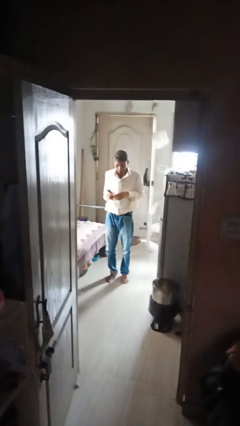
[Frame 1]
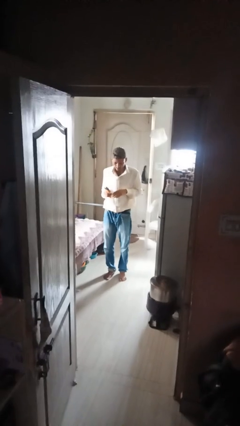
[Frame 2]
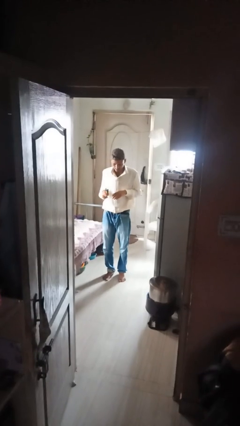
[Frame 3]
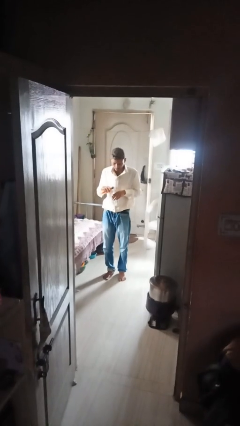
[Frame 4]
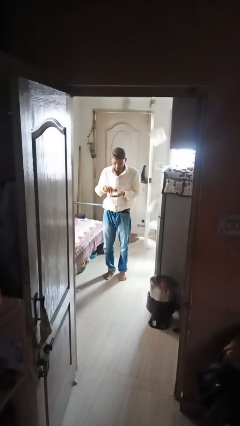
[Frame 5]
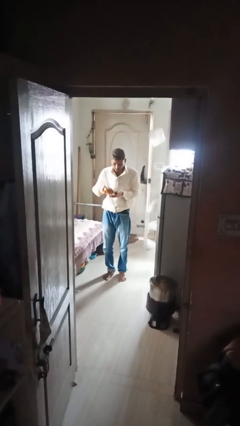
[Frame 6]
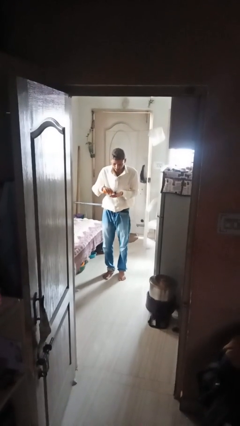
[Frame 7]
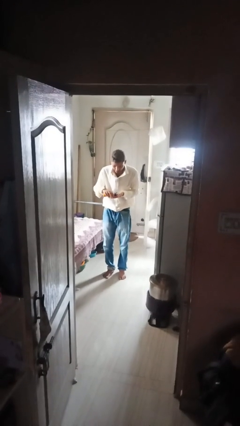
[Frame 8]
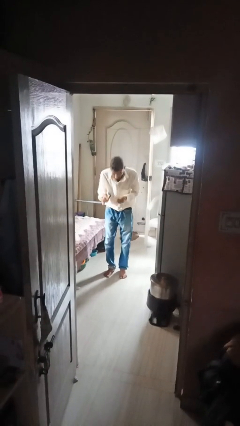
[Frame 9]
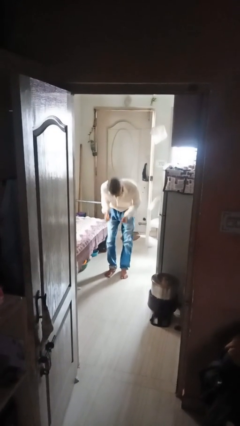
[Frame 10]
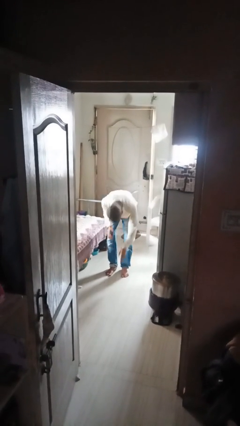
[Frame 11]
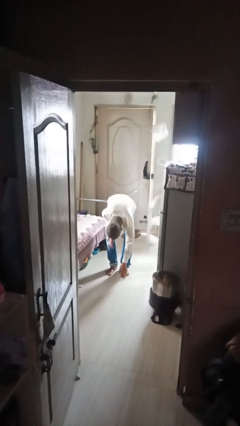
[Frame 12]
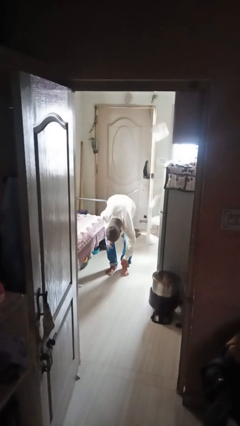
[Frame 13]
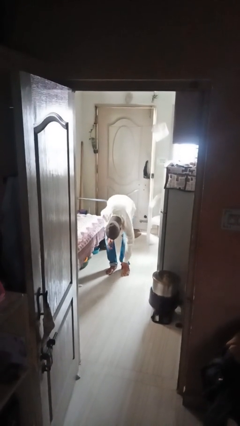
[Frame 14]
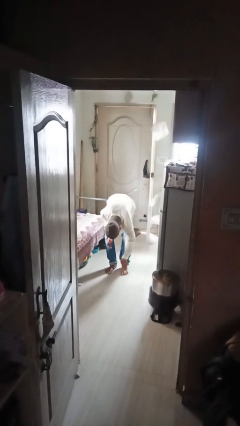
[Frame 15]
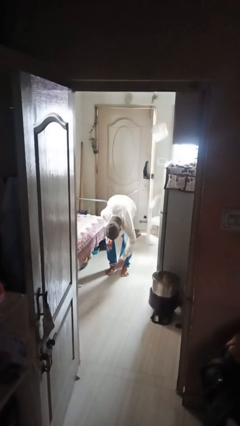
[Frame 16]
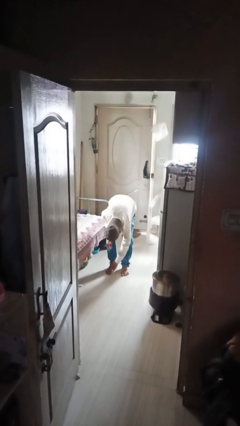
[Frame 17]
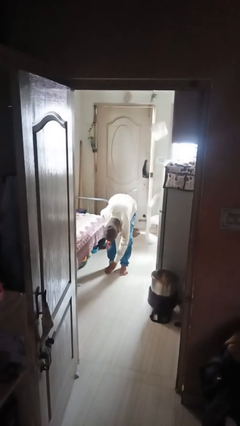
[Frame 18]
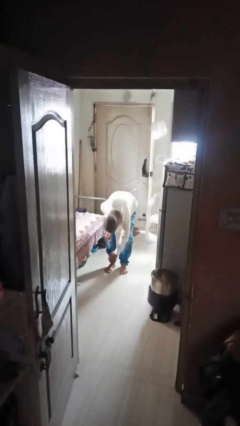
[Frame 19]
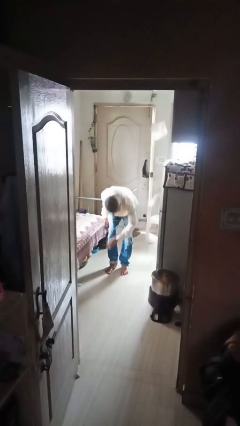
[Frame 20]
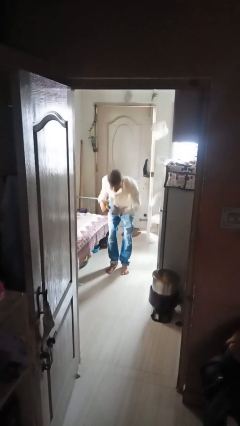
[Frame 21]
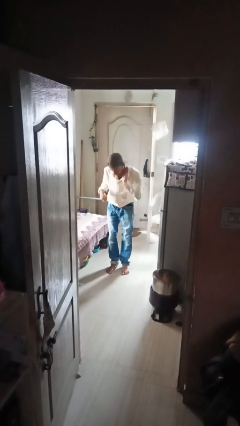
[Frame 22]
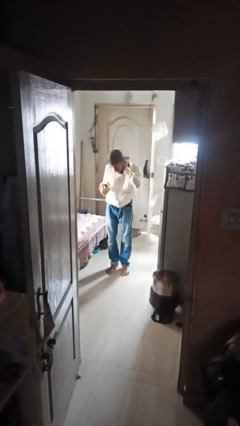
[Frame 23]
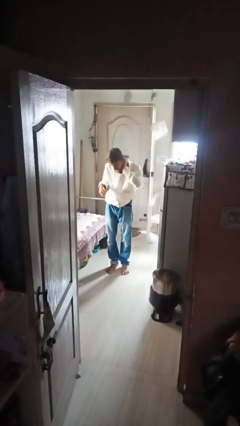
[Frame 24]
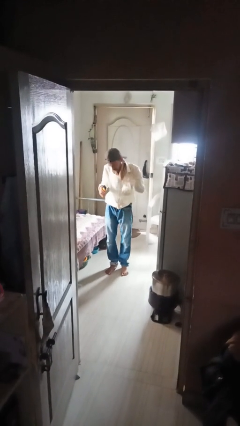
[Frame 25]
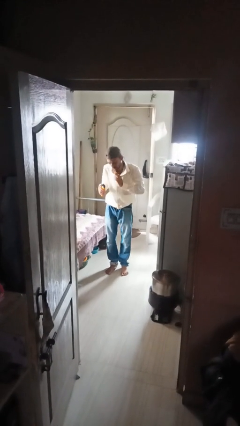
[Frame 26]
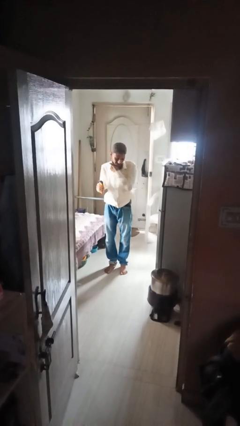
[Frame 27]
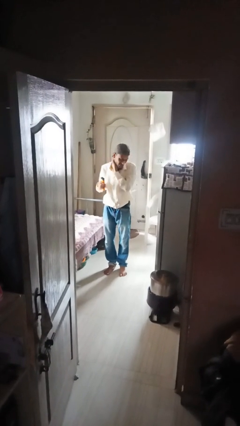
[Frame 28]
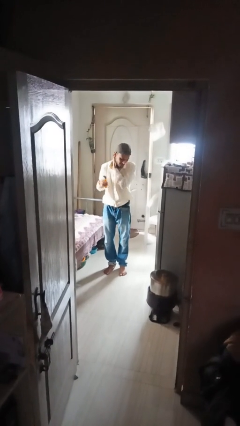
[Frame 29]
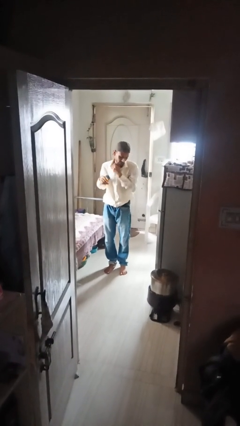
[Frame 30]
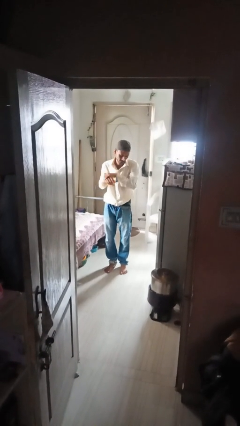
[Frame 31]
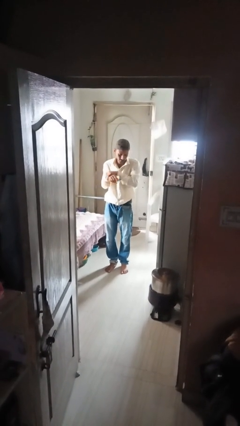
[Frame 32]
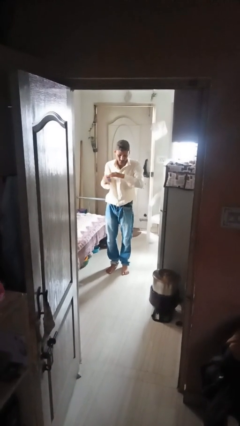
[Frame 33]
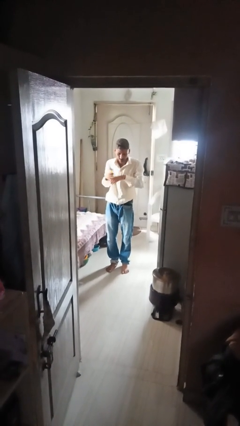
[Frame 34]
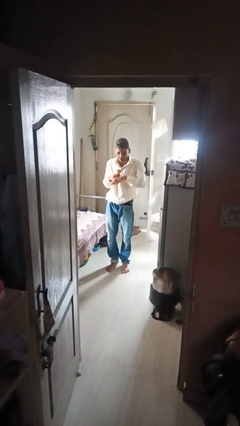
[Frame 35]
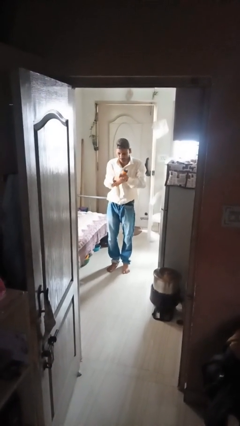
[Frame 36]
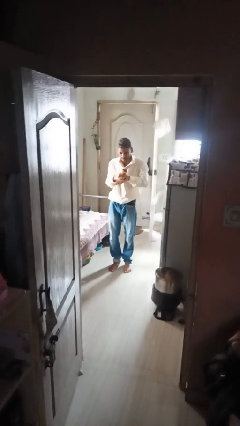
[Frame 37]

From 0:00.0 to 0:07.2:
person applies sunscreen

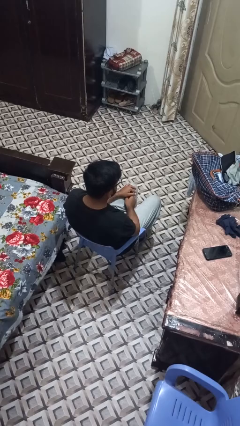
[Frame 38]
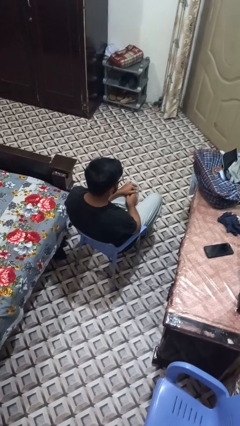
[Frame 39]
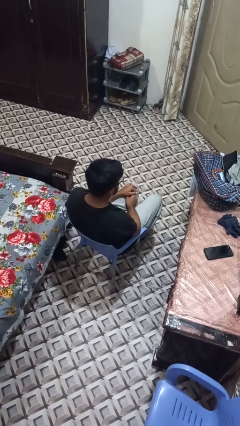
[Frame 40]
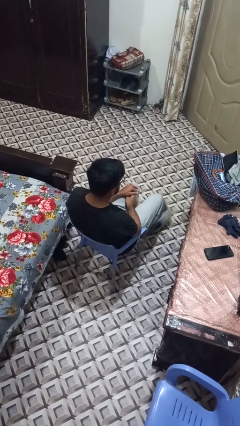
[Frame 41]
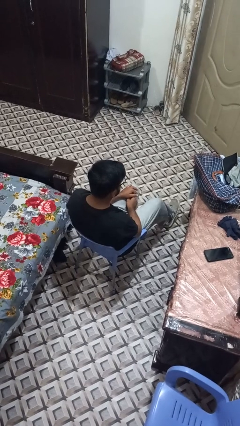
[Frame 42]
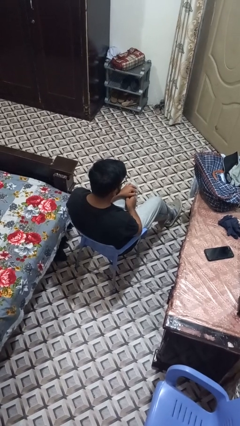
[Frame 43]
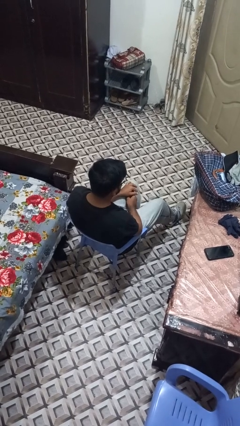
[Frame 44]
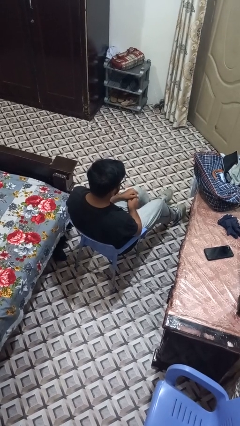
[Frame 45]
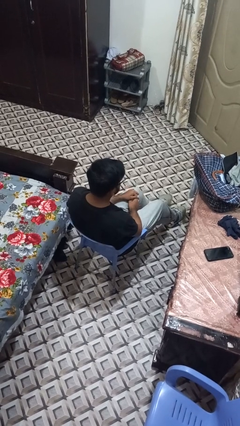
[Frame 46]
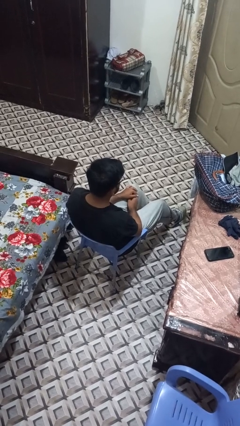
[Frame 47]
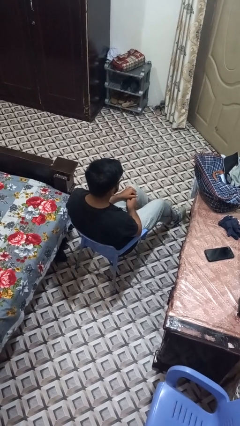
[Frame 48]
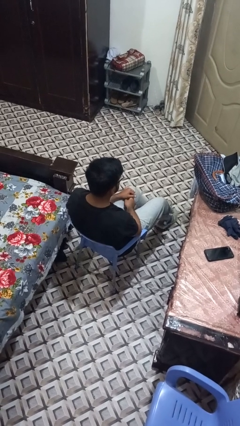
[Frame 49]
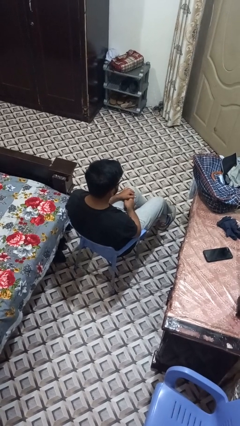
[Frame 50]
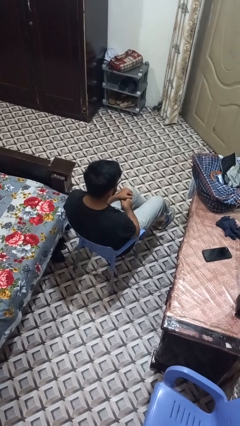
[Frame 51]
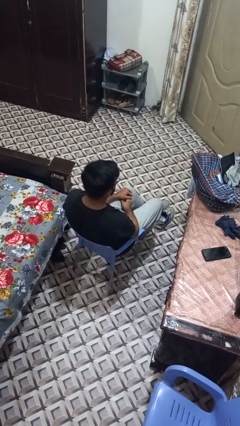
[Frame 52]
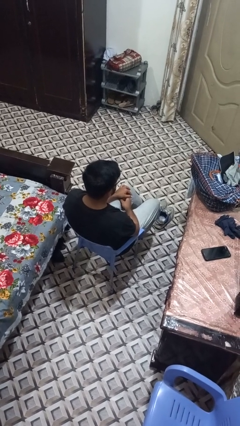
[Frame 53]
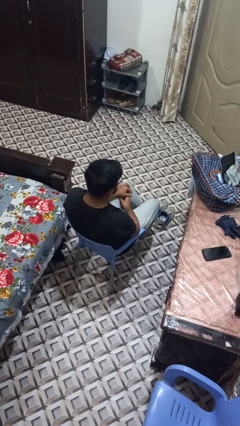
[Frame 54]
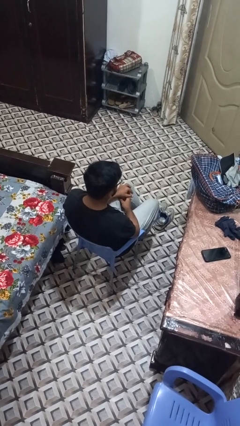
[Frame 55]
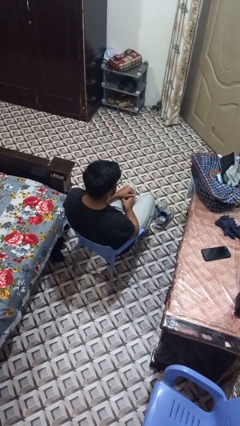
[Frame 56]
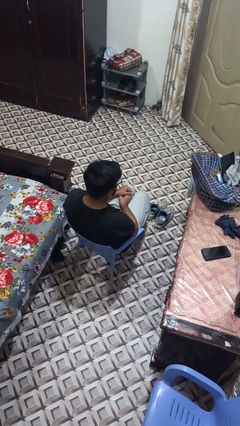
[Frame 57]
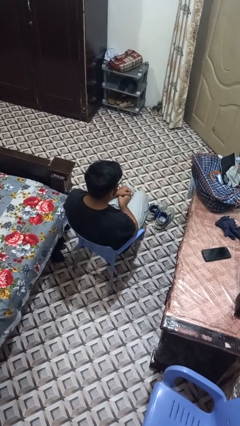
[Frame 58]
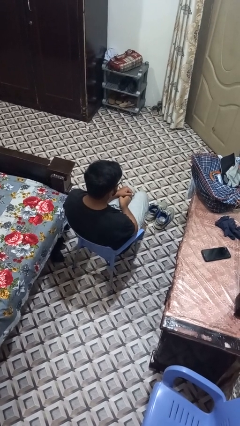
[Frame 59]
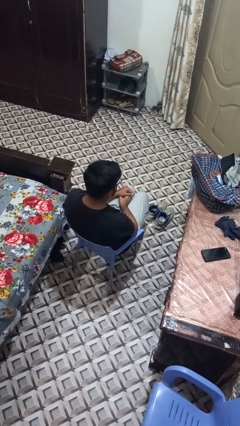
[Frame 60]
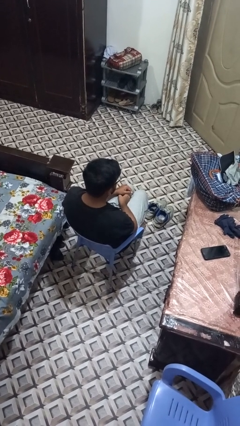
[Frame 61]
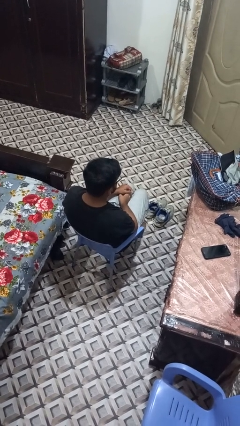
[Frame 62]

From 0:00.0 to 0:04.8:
person takes off shoes

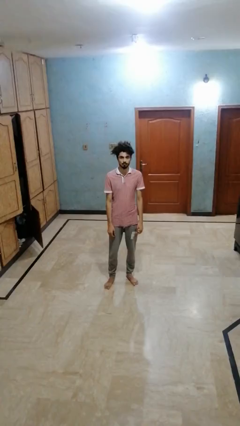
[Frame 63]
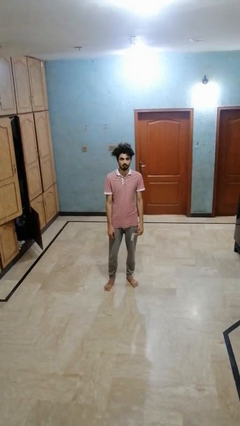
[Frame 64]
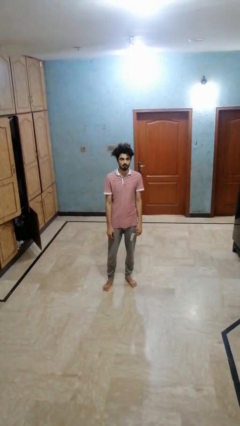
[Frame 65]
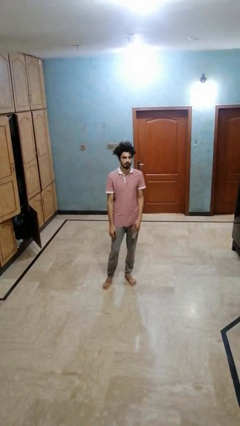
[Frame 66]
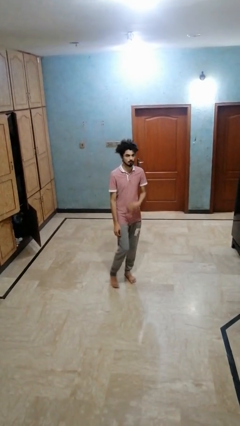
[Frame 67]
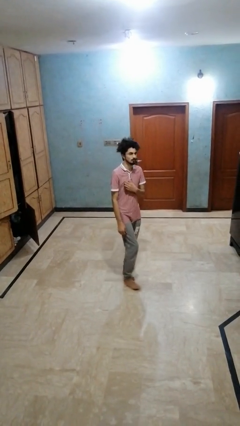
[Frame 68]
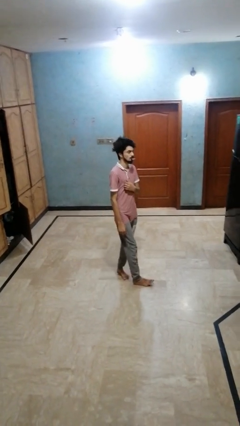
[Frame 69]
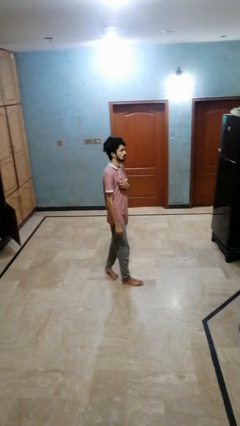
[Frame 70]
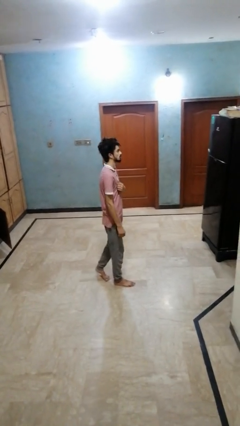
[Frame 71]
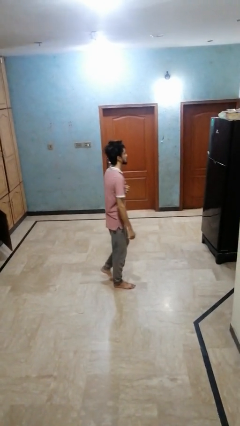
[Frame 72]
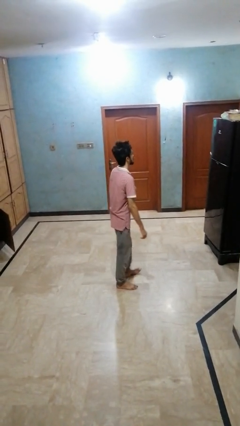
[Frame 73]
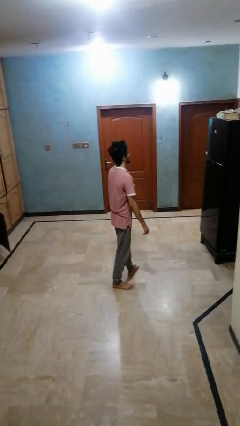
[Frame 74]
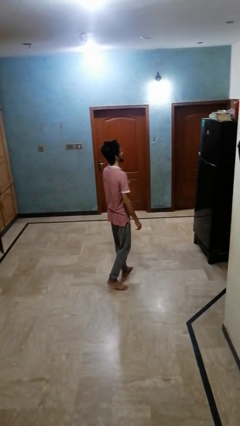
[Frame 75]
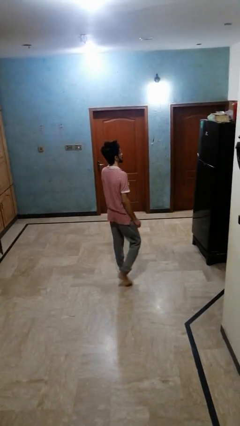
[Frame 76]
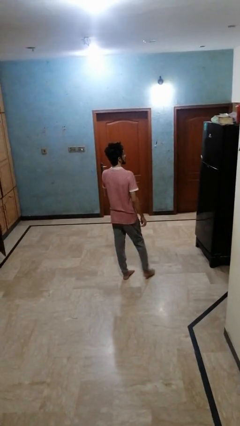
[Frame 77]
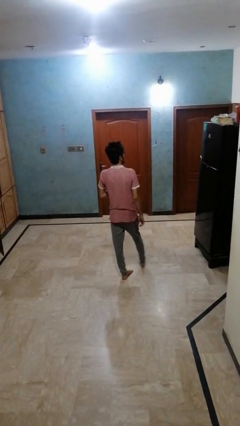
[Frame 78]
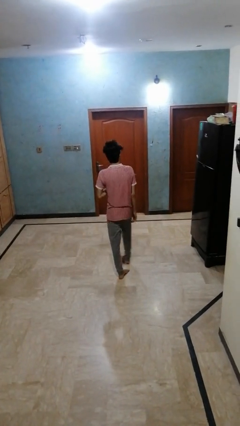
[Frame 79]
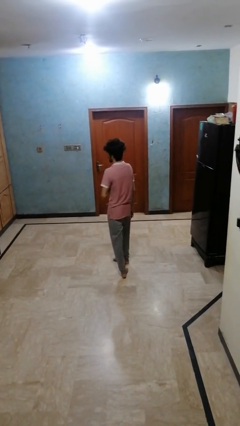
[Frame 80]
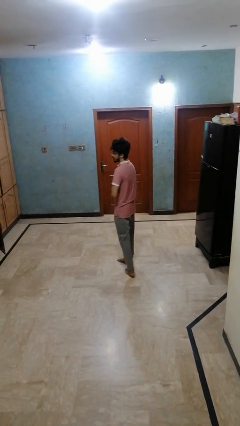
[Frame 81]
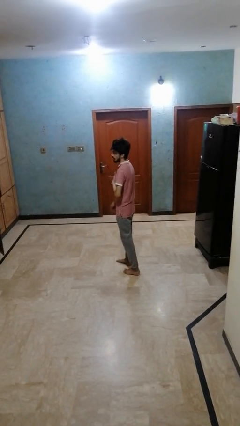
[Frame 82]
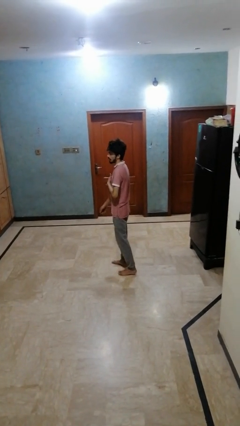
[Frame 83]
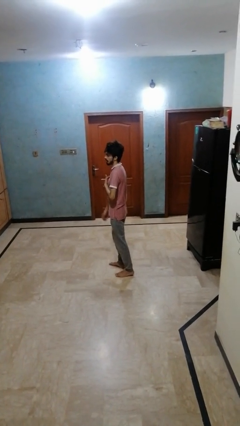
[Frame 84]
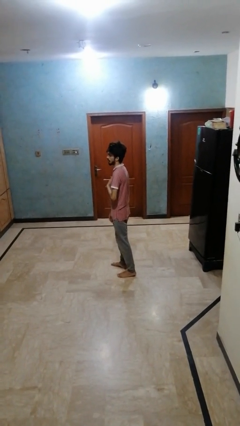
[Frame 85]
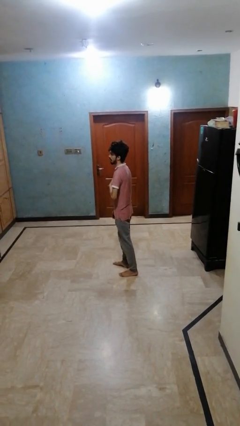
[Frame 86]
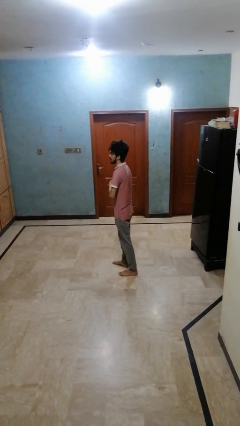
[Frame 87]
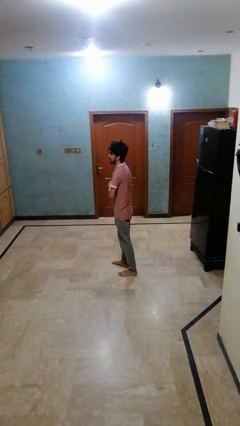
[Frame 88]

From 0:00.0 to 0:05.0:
person twirls

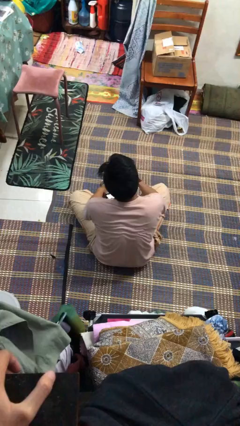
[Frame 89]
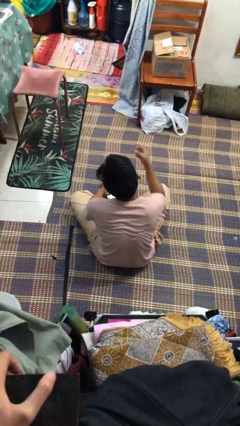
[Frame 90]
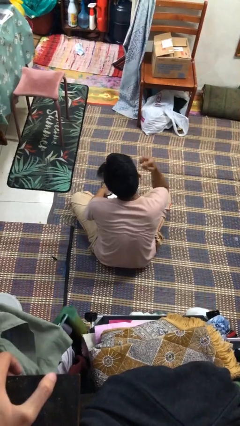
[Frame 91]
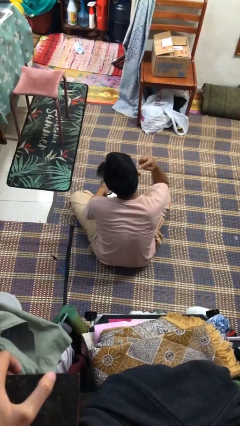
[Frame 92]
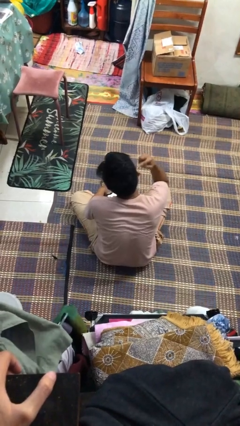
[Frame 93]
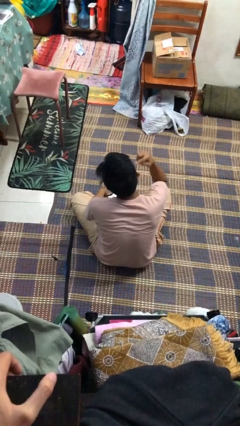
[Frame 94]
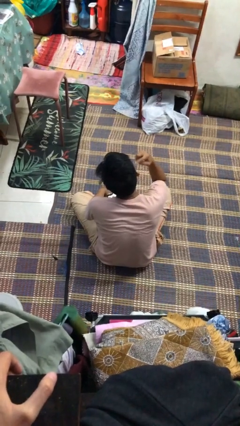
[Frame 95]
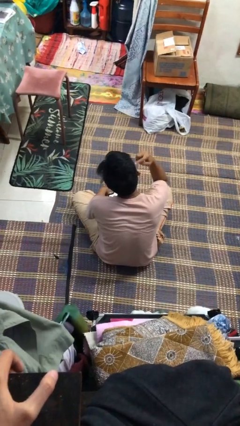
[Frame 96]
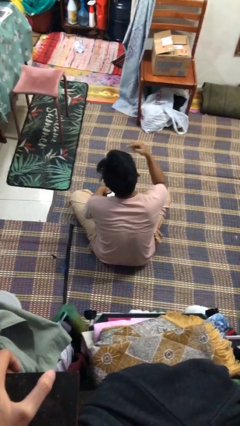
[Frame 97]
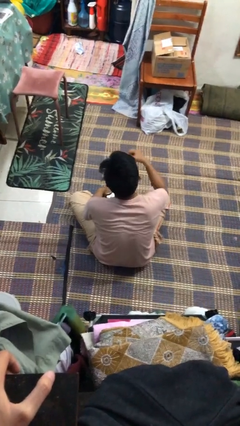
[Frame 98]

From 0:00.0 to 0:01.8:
person gestures listen closely
